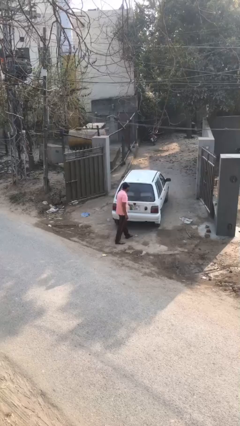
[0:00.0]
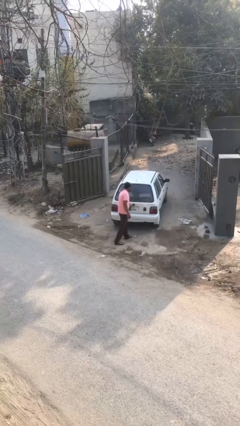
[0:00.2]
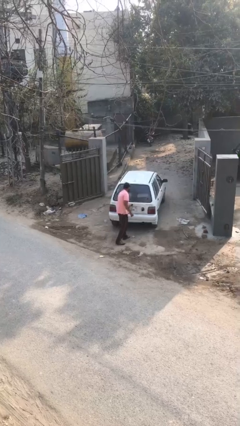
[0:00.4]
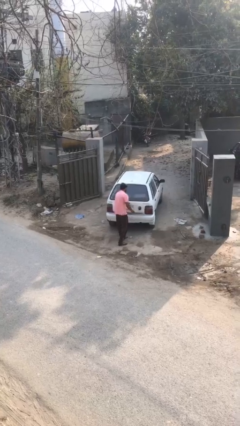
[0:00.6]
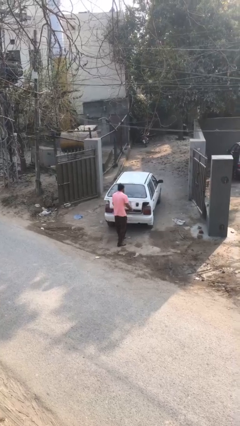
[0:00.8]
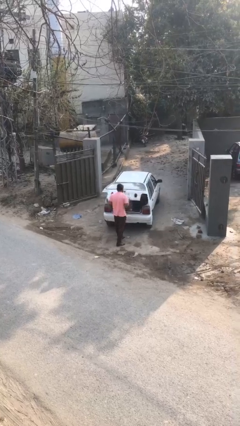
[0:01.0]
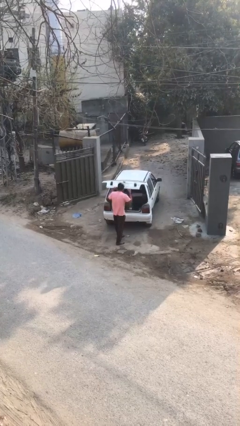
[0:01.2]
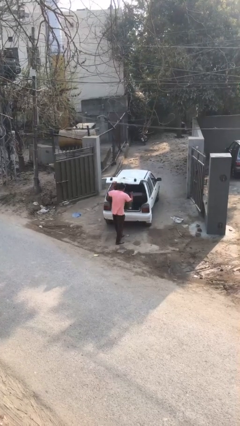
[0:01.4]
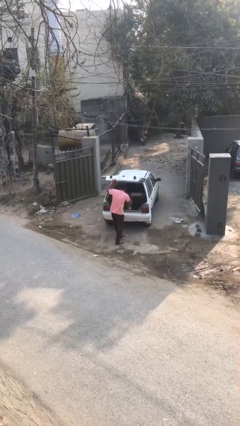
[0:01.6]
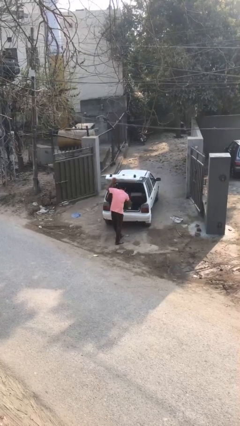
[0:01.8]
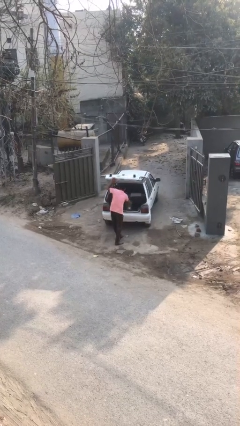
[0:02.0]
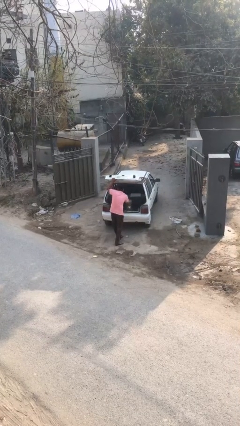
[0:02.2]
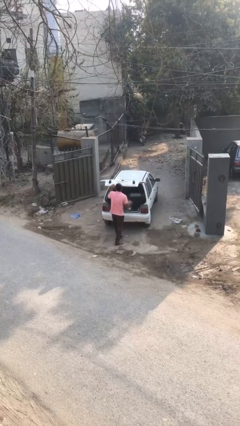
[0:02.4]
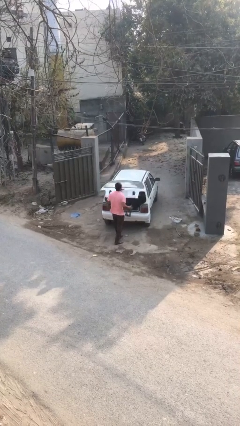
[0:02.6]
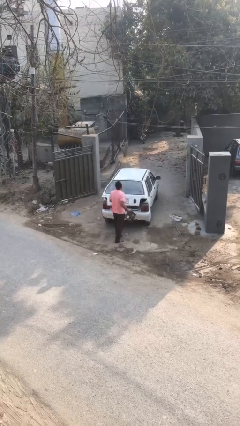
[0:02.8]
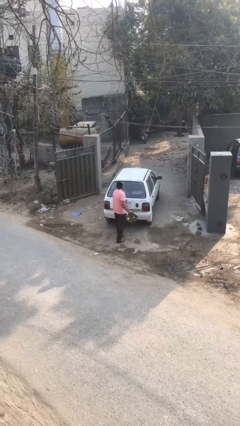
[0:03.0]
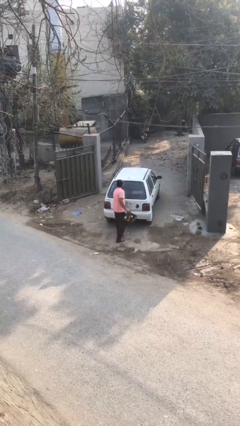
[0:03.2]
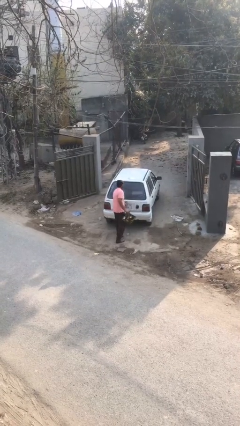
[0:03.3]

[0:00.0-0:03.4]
person unloads car

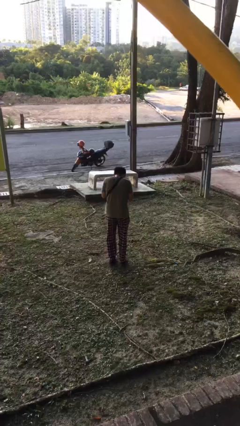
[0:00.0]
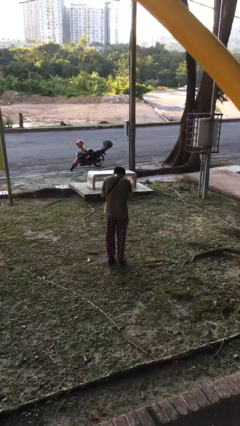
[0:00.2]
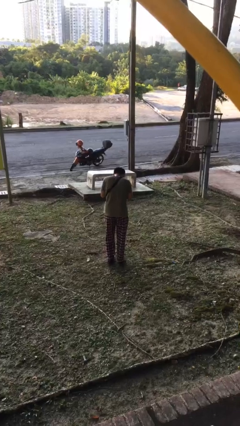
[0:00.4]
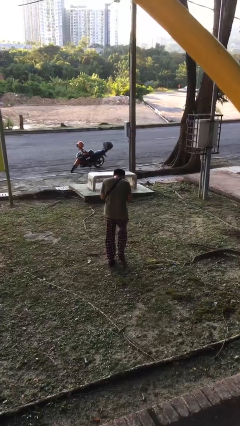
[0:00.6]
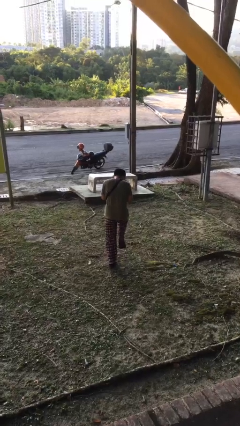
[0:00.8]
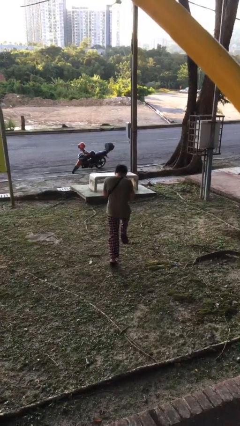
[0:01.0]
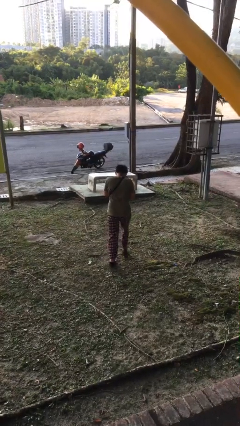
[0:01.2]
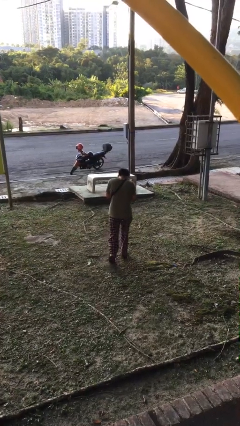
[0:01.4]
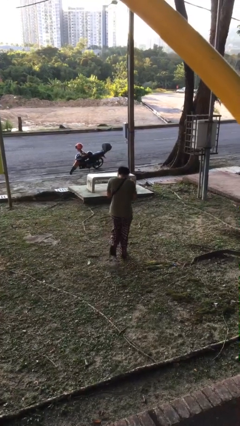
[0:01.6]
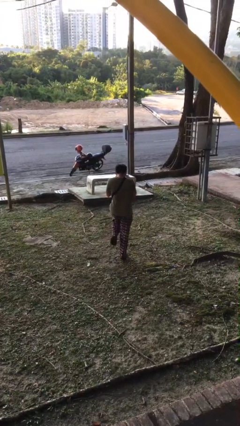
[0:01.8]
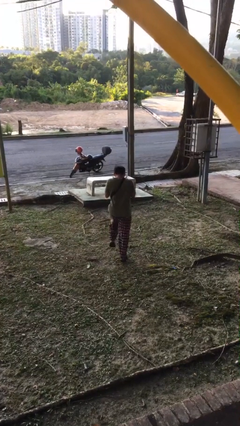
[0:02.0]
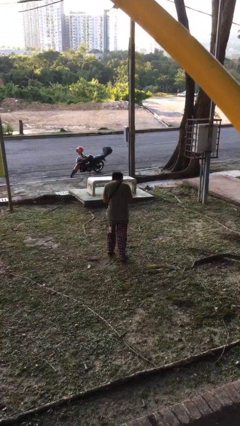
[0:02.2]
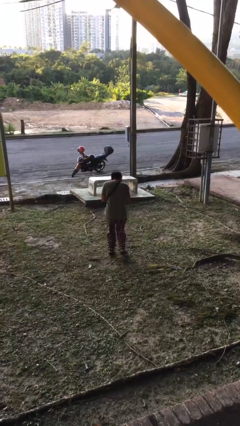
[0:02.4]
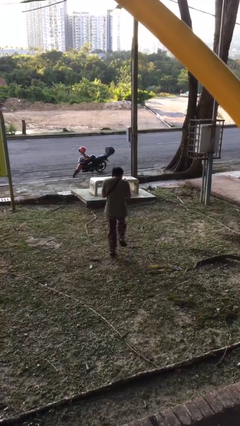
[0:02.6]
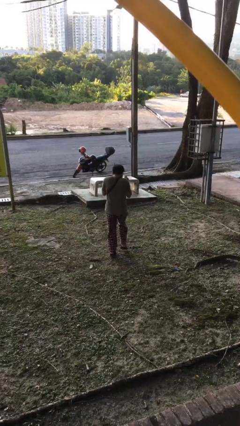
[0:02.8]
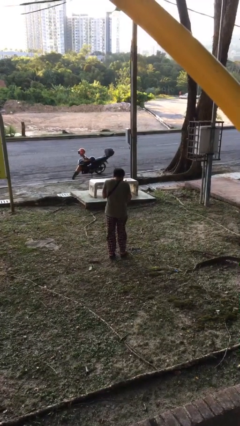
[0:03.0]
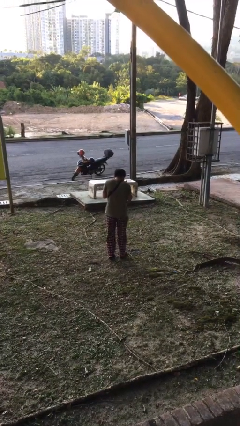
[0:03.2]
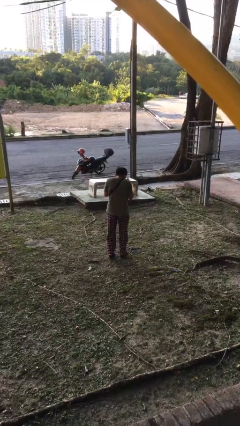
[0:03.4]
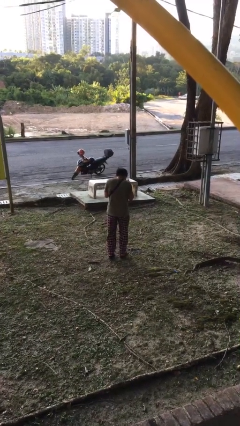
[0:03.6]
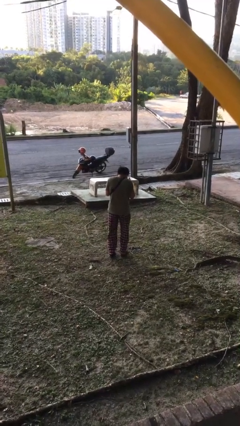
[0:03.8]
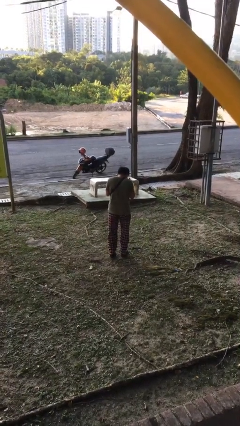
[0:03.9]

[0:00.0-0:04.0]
person walks tiptoe

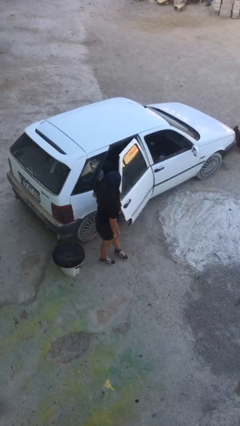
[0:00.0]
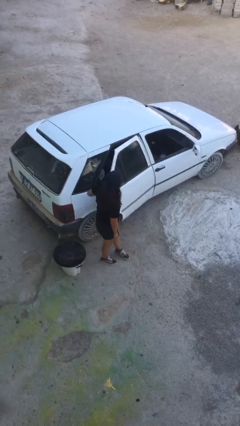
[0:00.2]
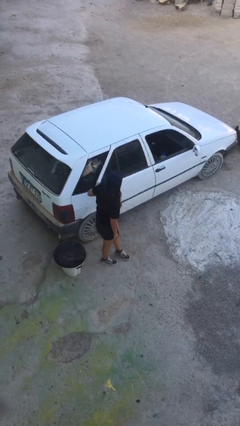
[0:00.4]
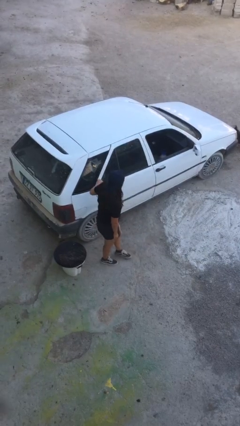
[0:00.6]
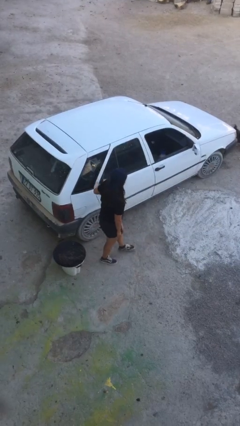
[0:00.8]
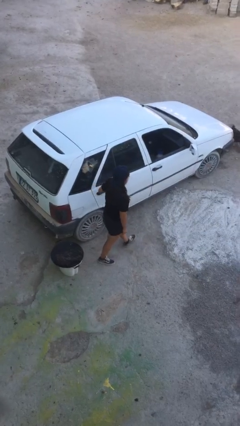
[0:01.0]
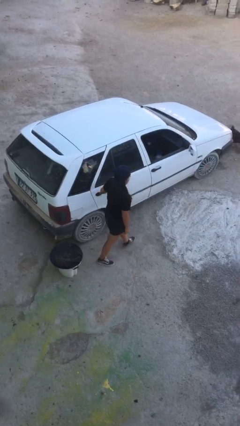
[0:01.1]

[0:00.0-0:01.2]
person closes car door

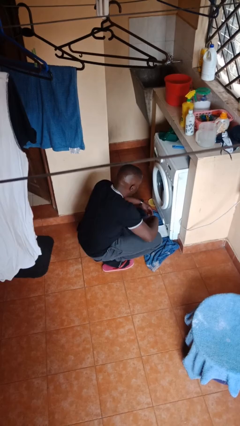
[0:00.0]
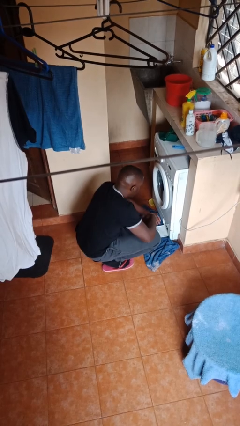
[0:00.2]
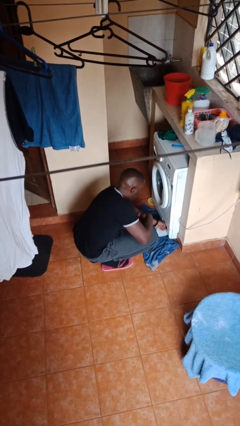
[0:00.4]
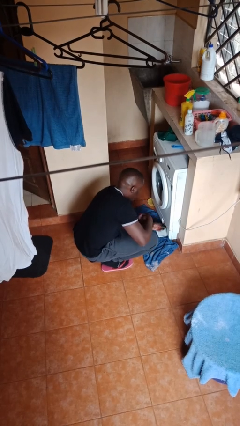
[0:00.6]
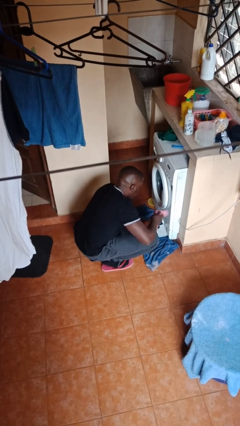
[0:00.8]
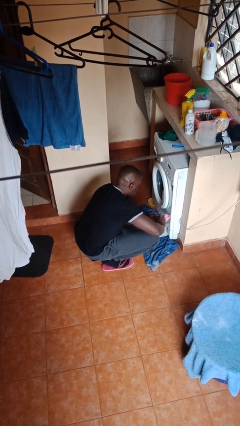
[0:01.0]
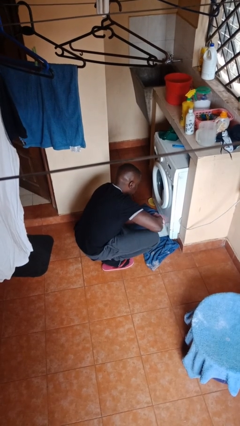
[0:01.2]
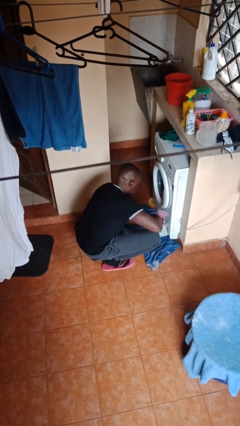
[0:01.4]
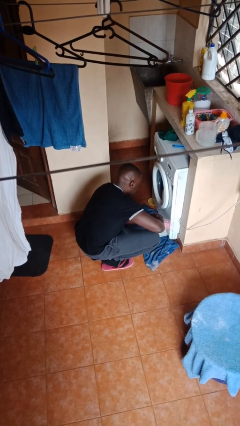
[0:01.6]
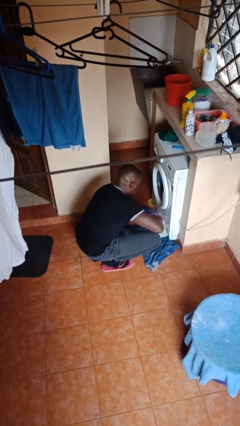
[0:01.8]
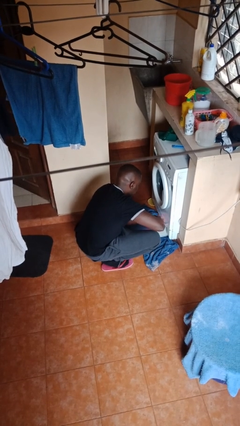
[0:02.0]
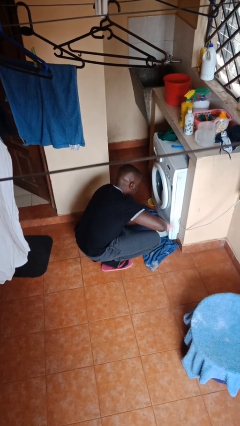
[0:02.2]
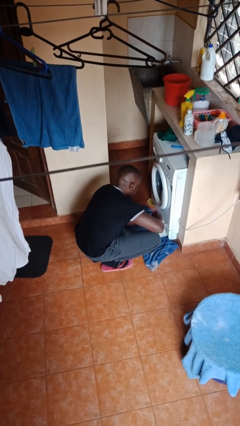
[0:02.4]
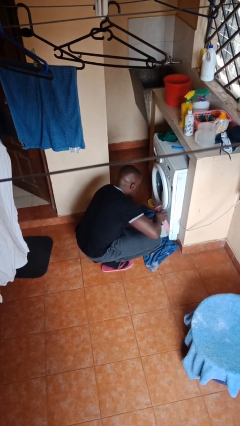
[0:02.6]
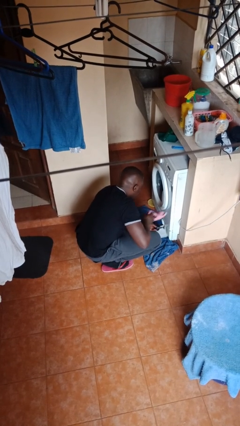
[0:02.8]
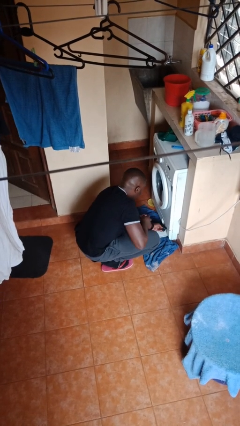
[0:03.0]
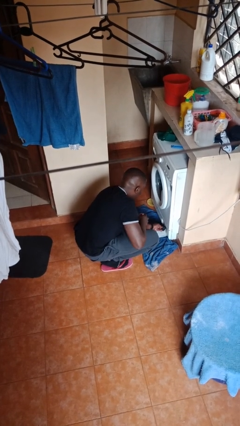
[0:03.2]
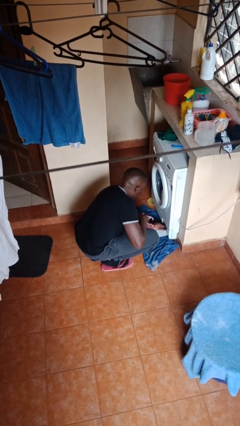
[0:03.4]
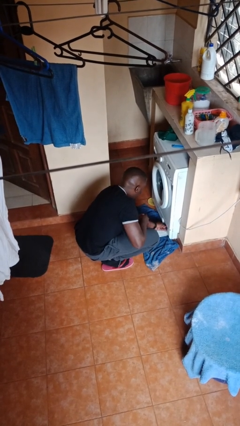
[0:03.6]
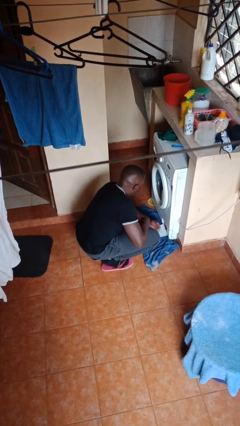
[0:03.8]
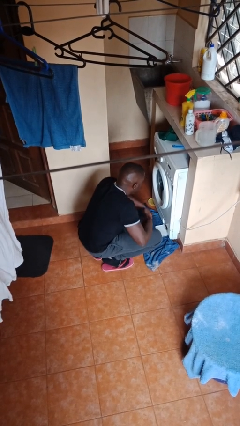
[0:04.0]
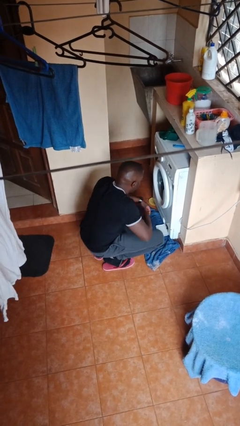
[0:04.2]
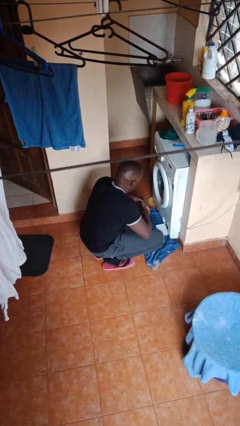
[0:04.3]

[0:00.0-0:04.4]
person cleans dryer lint trap

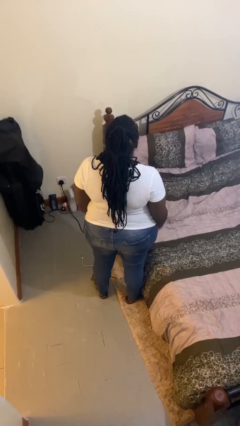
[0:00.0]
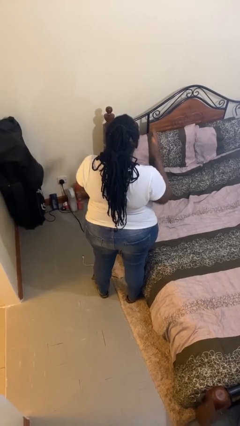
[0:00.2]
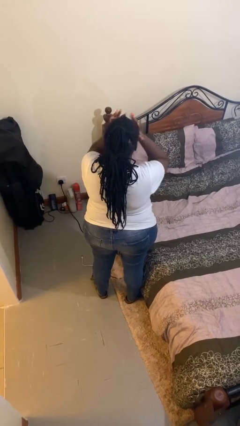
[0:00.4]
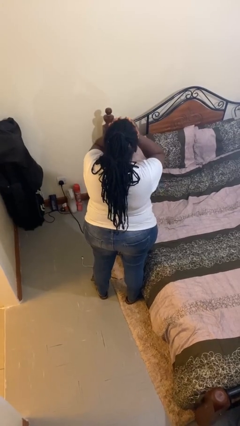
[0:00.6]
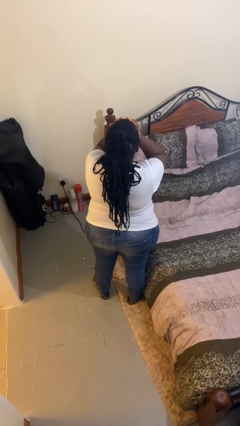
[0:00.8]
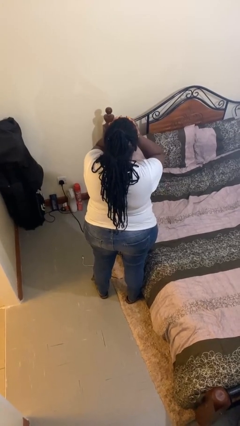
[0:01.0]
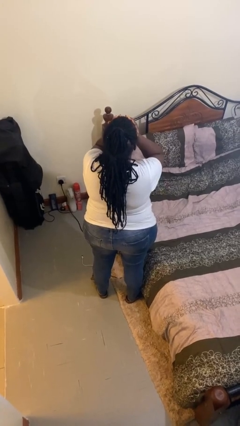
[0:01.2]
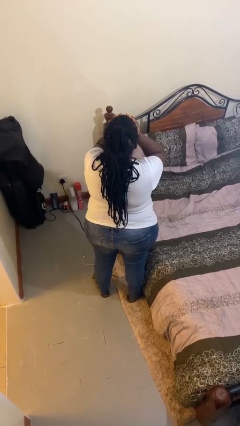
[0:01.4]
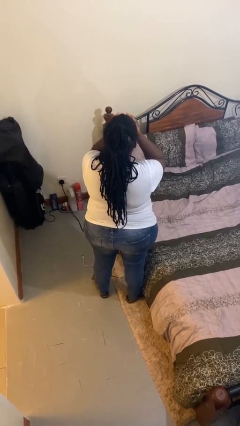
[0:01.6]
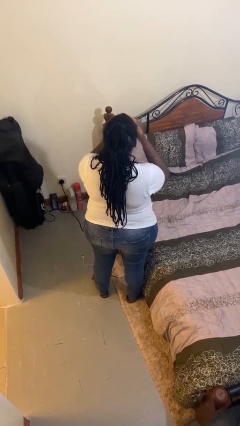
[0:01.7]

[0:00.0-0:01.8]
person covers face with hands

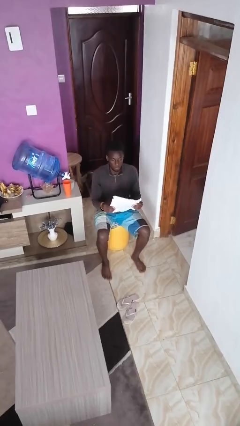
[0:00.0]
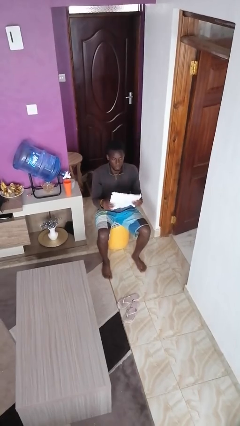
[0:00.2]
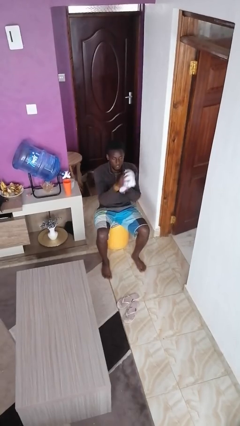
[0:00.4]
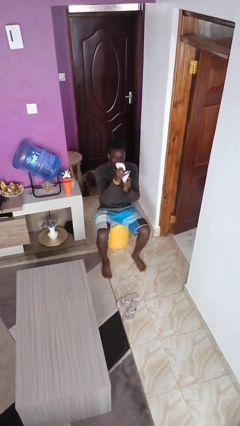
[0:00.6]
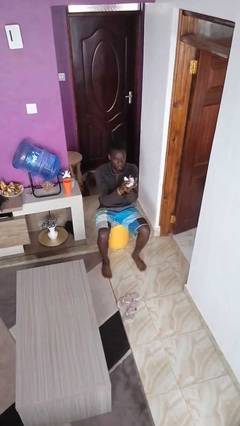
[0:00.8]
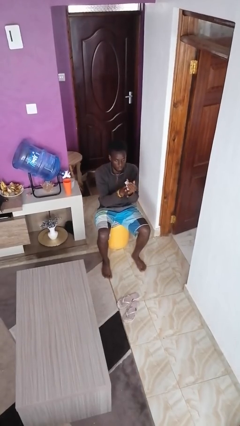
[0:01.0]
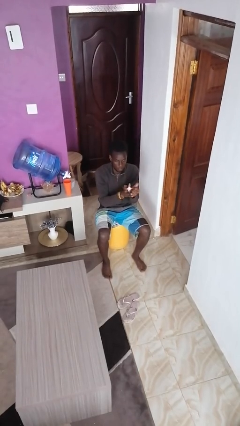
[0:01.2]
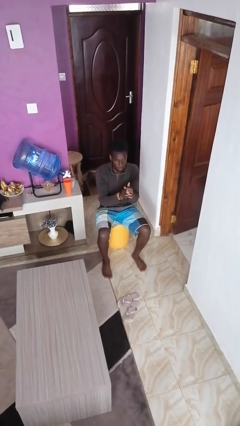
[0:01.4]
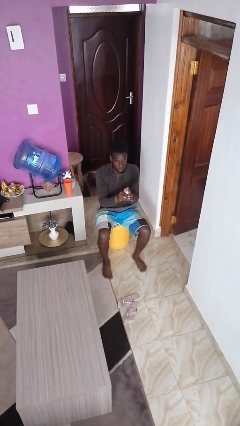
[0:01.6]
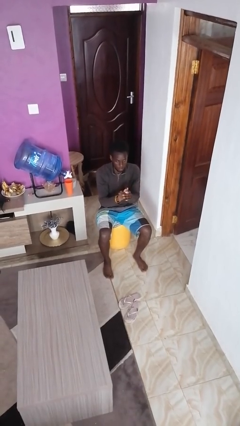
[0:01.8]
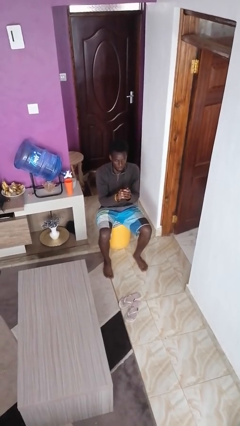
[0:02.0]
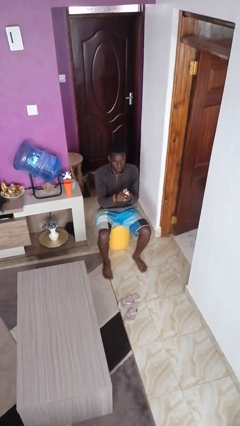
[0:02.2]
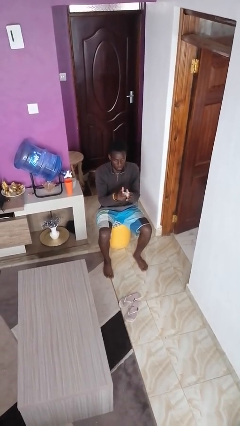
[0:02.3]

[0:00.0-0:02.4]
person crumples paper
